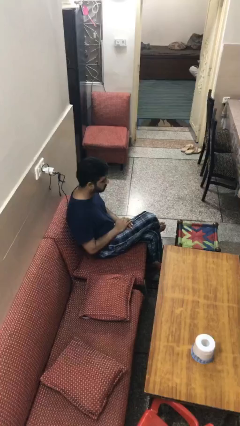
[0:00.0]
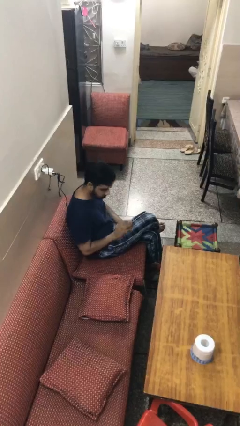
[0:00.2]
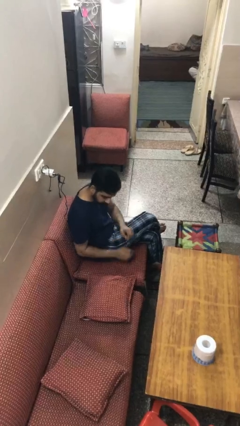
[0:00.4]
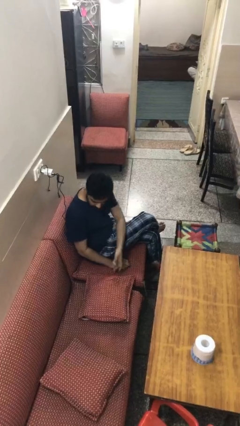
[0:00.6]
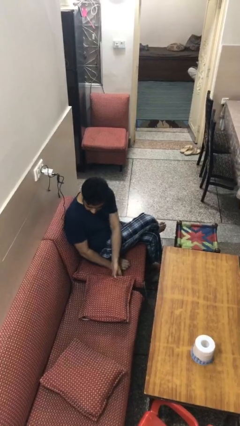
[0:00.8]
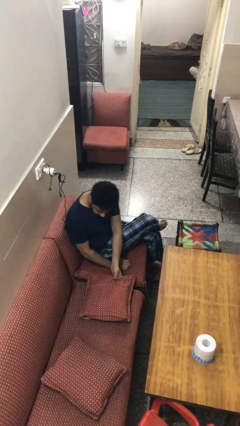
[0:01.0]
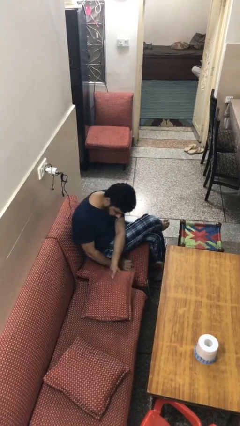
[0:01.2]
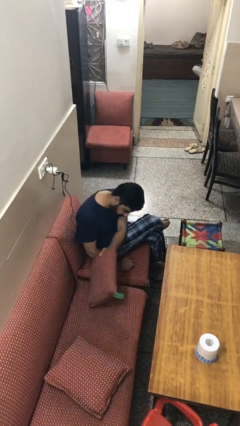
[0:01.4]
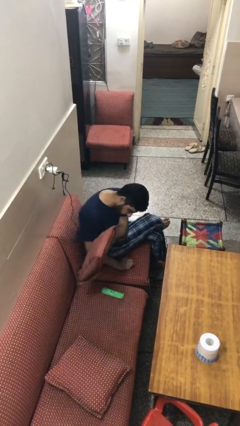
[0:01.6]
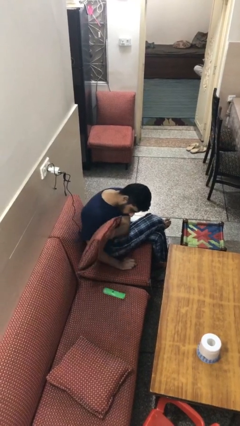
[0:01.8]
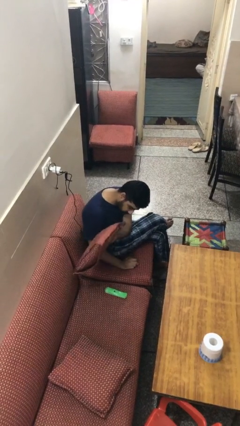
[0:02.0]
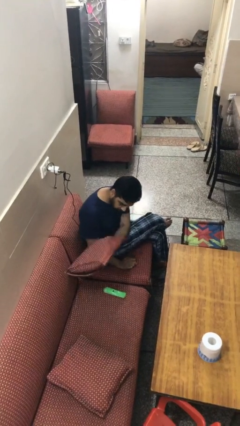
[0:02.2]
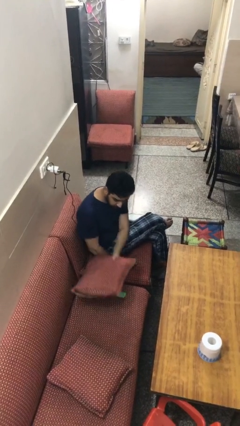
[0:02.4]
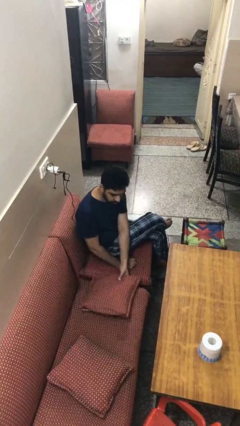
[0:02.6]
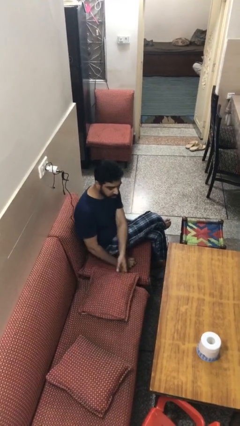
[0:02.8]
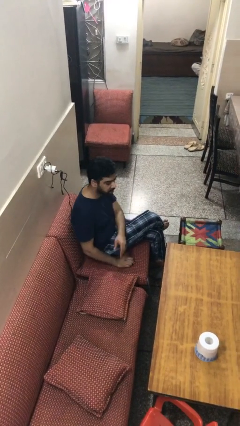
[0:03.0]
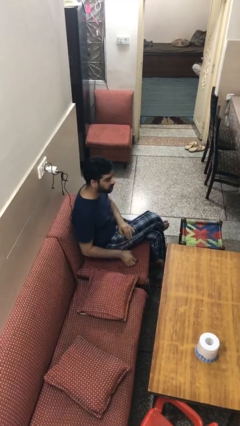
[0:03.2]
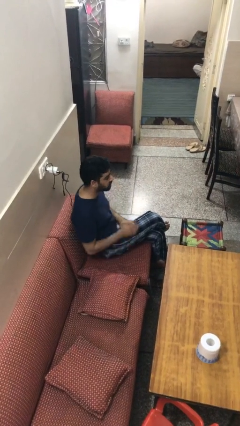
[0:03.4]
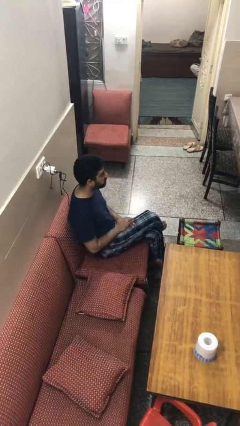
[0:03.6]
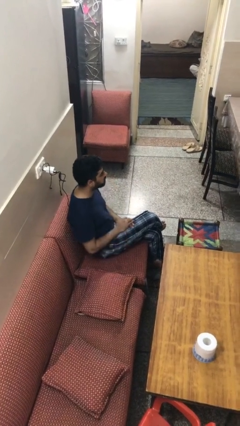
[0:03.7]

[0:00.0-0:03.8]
person searches in couch

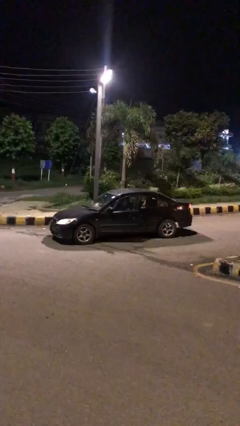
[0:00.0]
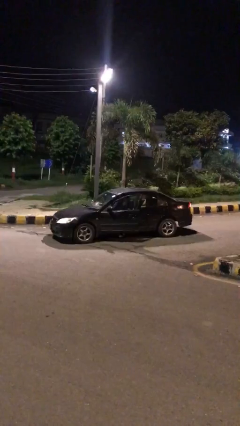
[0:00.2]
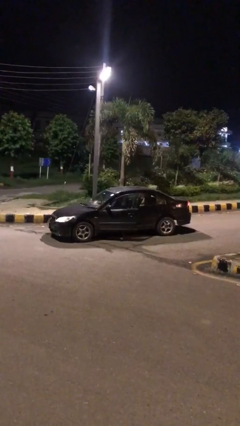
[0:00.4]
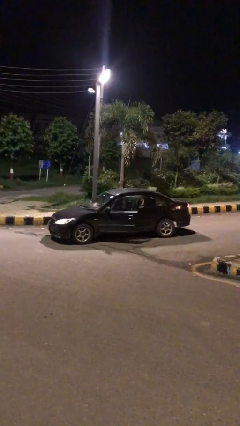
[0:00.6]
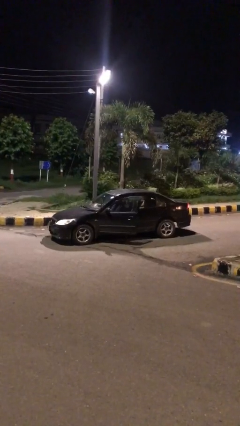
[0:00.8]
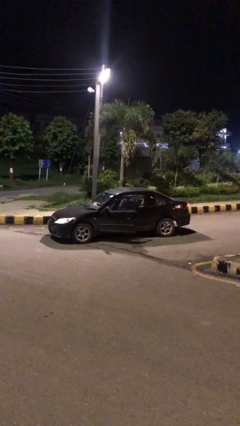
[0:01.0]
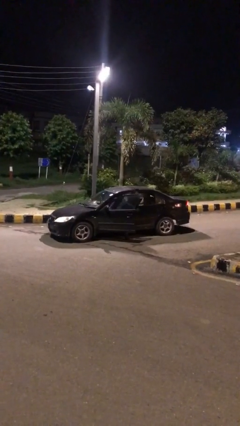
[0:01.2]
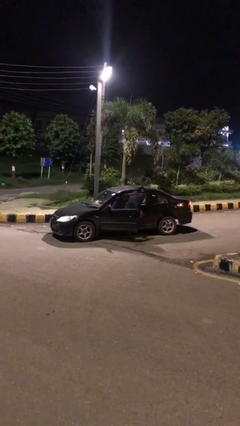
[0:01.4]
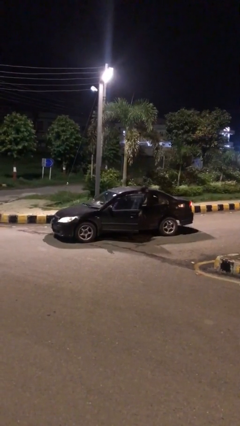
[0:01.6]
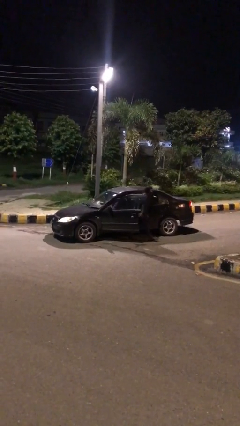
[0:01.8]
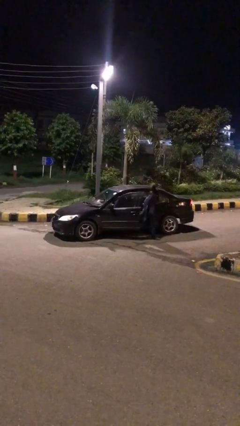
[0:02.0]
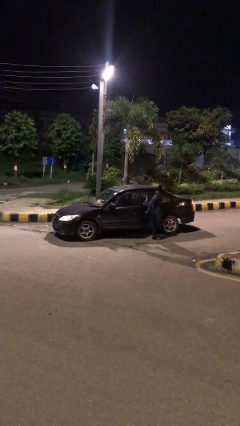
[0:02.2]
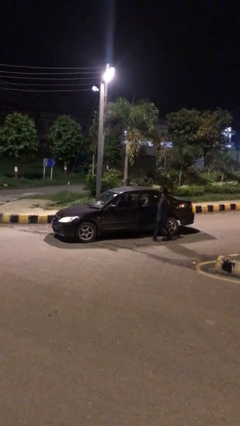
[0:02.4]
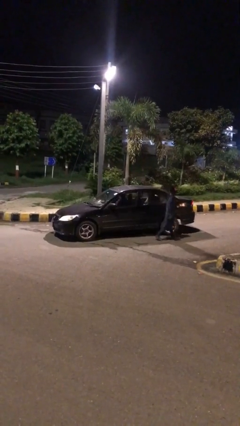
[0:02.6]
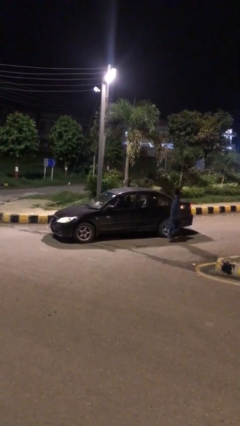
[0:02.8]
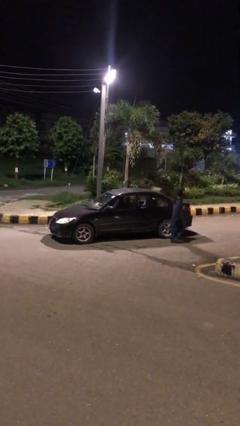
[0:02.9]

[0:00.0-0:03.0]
car drops off person

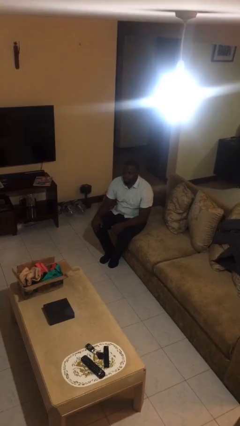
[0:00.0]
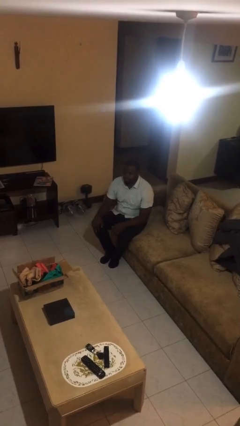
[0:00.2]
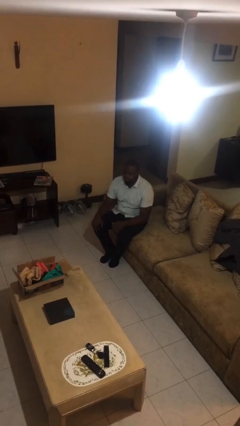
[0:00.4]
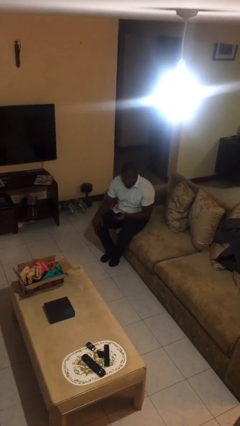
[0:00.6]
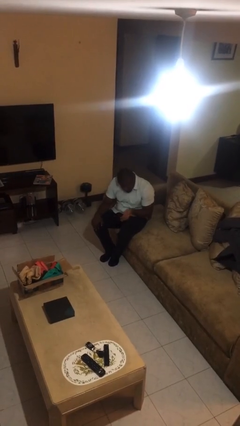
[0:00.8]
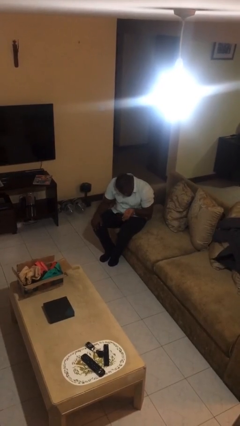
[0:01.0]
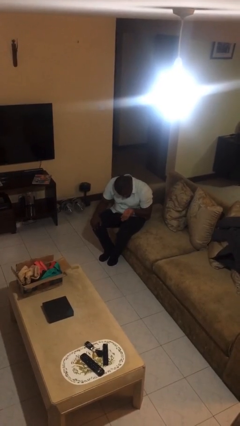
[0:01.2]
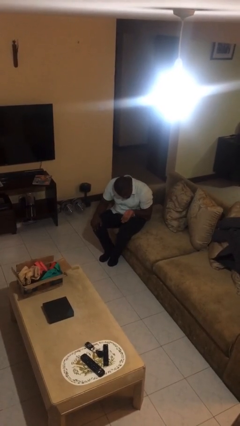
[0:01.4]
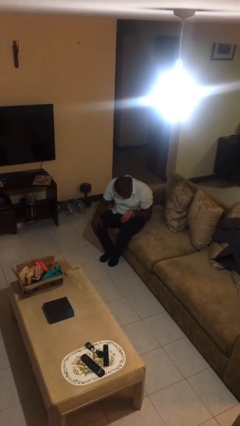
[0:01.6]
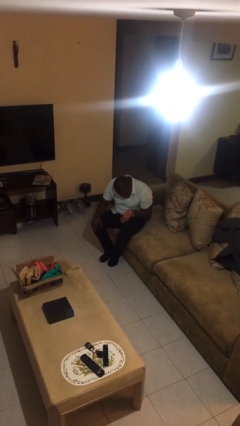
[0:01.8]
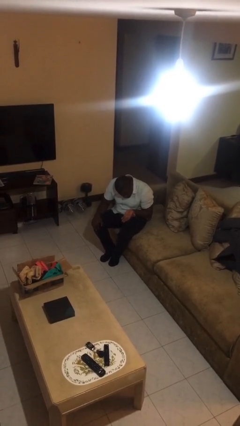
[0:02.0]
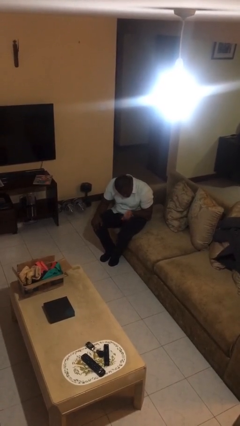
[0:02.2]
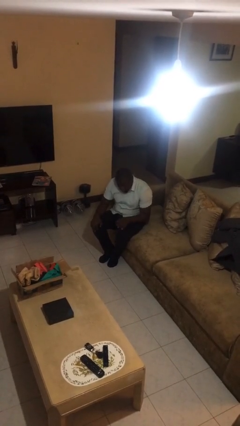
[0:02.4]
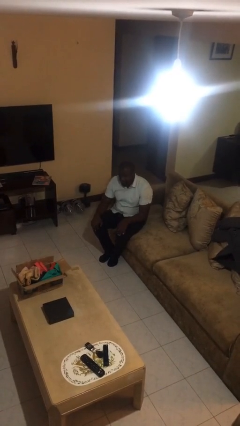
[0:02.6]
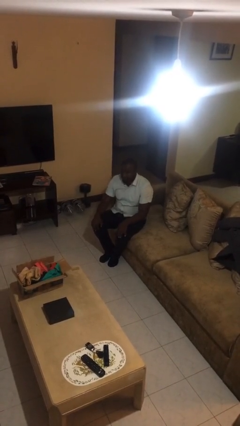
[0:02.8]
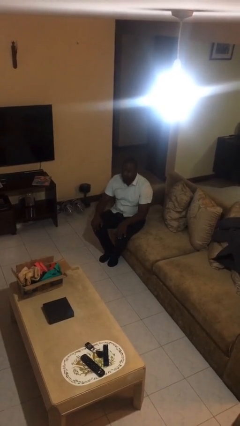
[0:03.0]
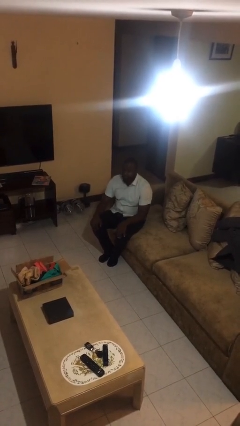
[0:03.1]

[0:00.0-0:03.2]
person looks at hands in lap

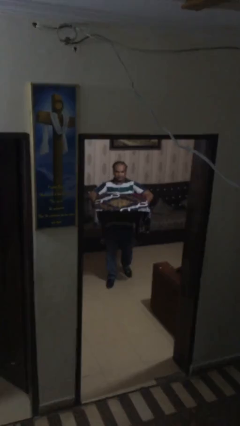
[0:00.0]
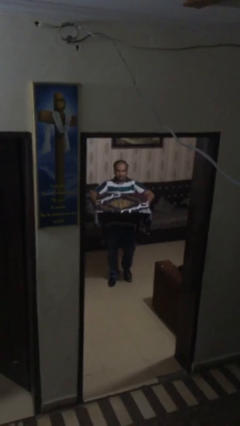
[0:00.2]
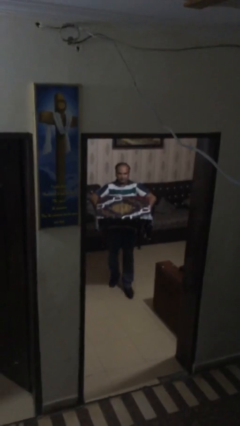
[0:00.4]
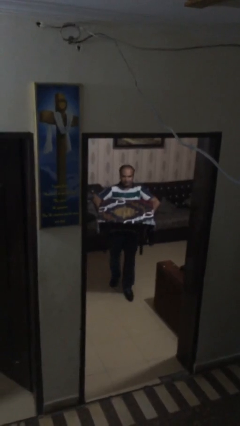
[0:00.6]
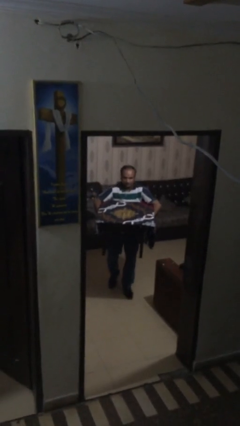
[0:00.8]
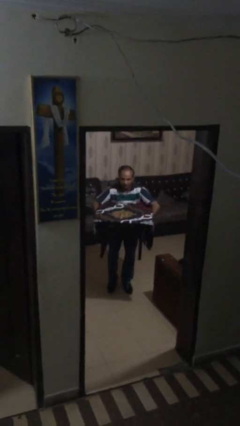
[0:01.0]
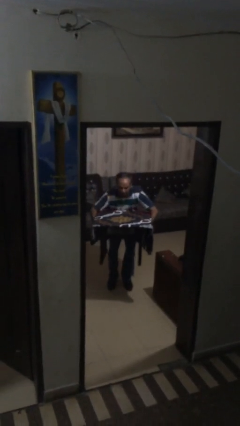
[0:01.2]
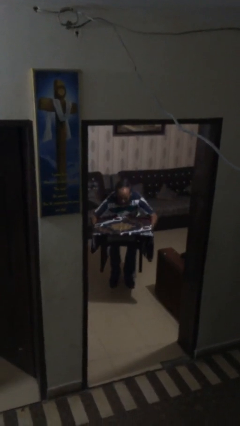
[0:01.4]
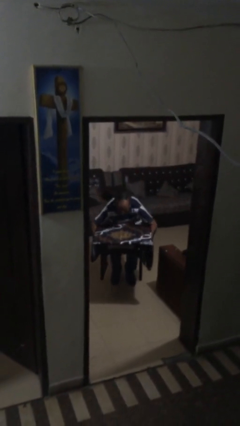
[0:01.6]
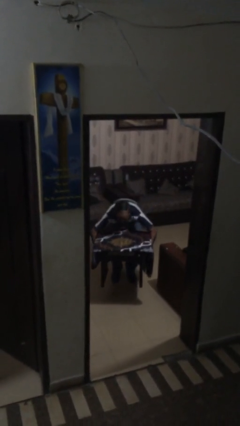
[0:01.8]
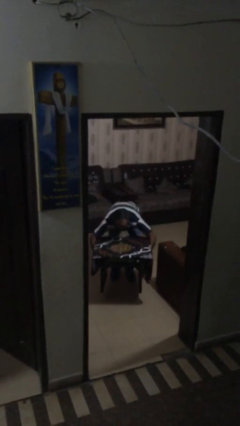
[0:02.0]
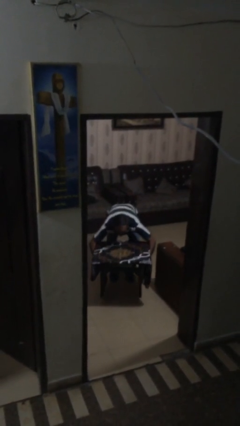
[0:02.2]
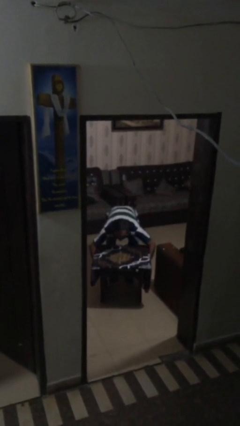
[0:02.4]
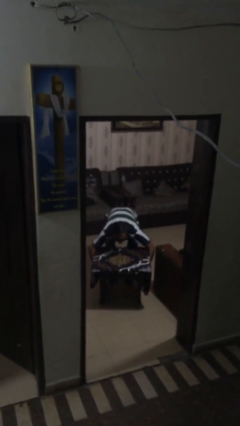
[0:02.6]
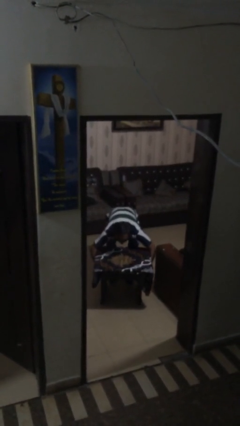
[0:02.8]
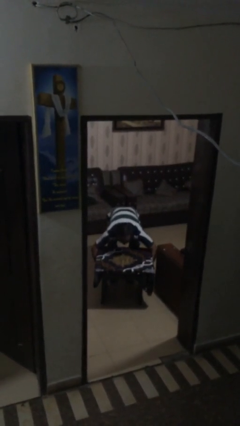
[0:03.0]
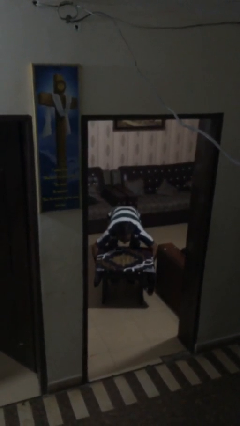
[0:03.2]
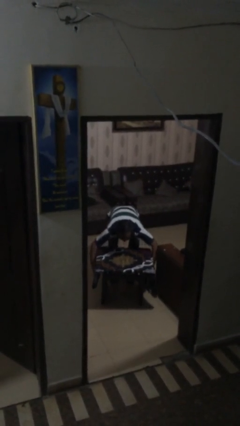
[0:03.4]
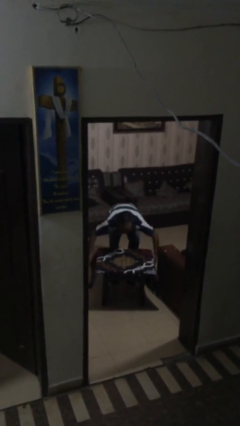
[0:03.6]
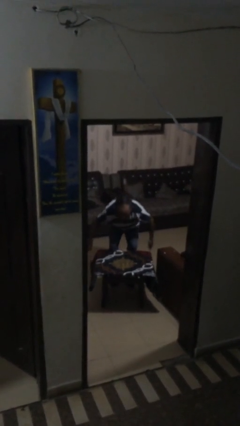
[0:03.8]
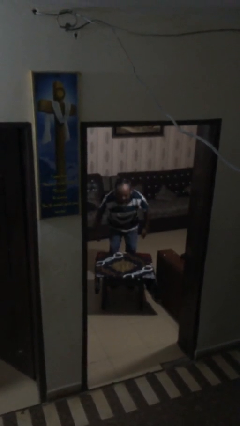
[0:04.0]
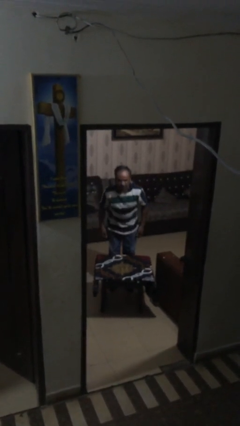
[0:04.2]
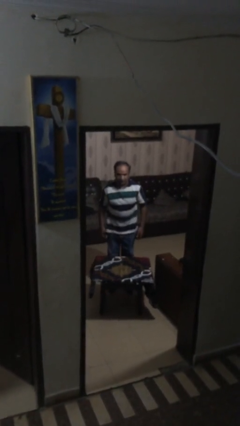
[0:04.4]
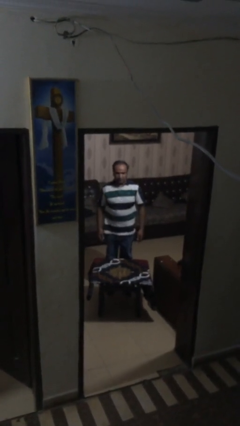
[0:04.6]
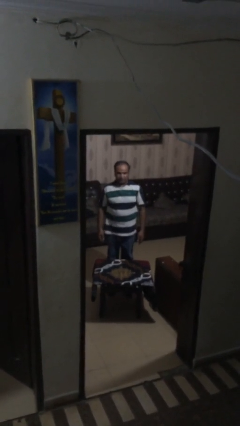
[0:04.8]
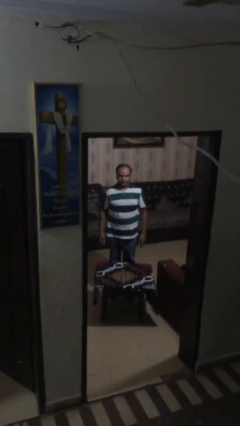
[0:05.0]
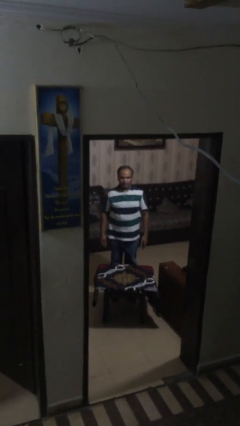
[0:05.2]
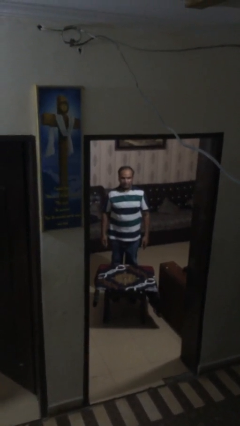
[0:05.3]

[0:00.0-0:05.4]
person puts down object on floor

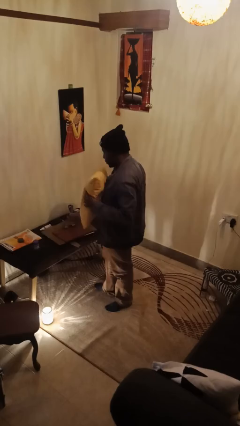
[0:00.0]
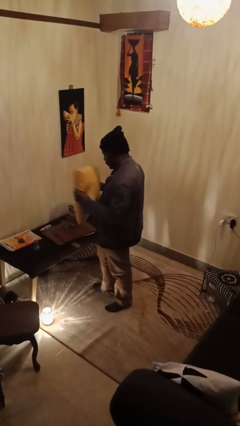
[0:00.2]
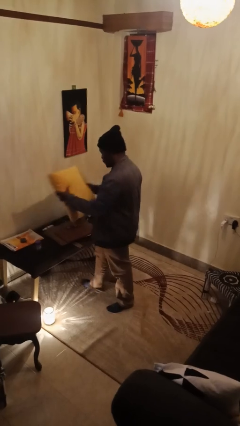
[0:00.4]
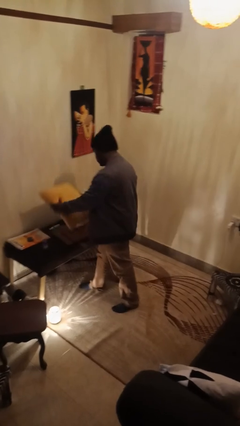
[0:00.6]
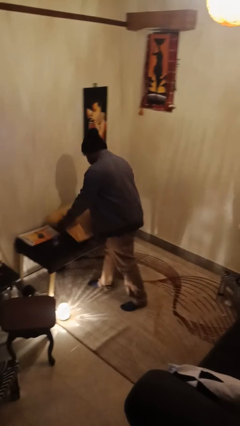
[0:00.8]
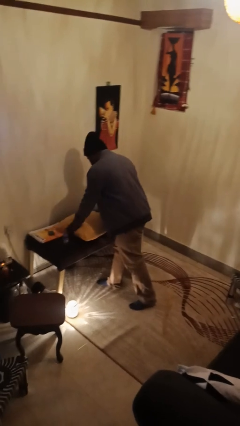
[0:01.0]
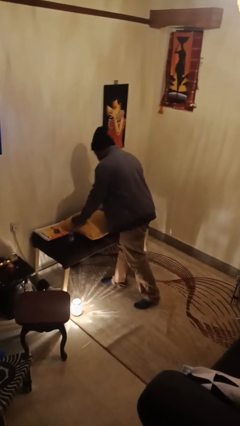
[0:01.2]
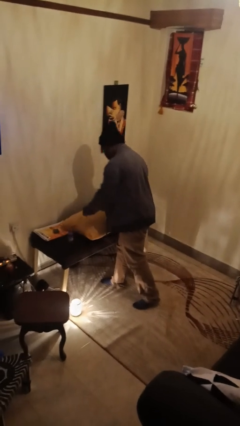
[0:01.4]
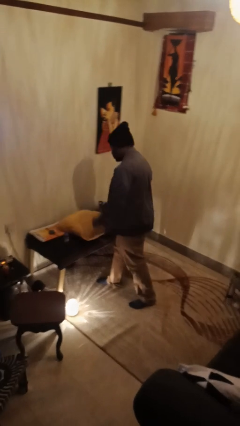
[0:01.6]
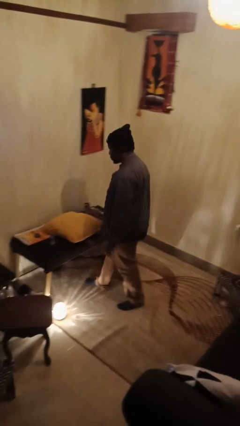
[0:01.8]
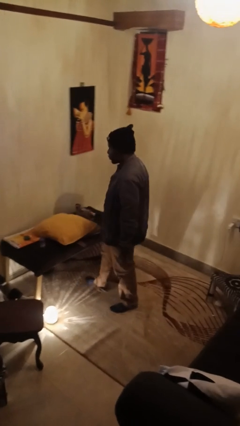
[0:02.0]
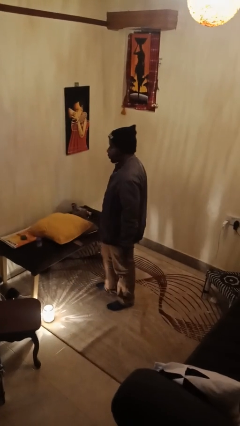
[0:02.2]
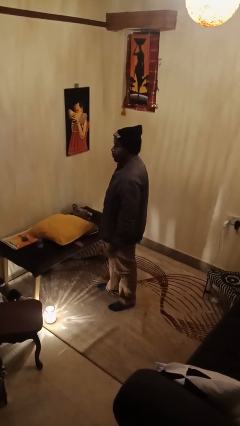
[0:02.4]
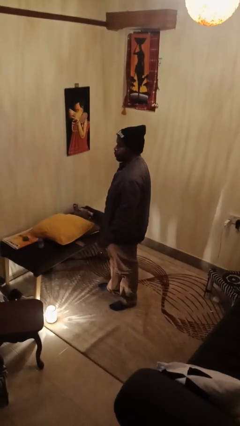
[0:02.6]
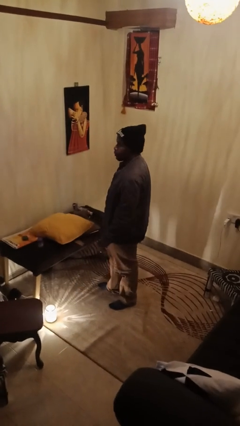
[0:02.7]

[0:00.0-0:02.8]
person puts down object on countertop
